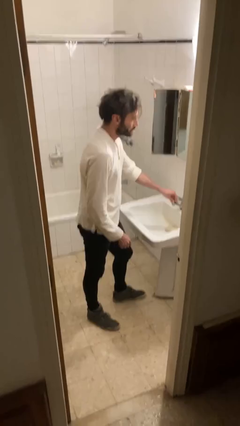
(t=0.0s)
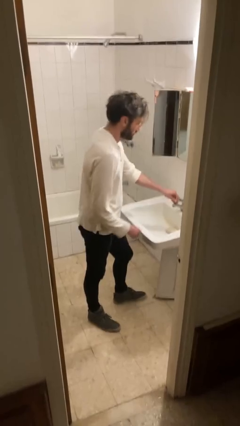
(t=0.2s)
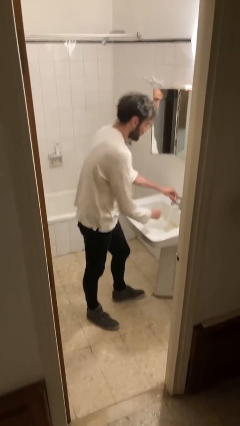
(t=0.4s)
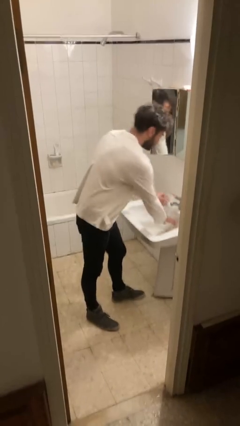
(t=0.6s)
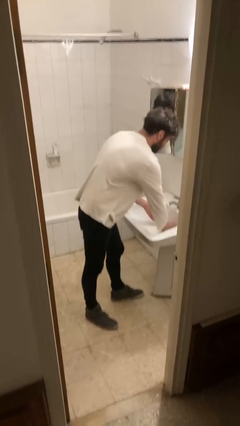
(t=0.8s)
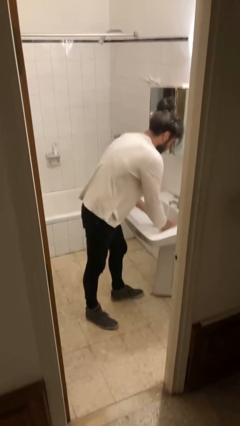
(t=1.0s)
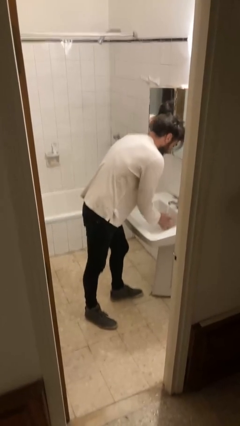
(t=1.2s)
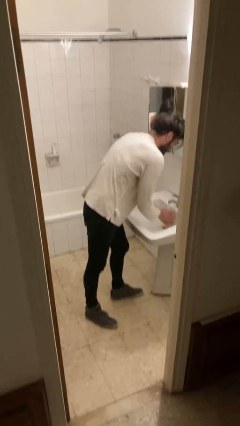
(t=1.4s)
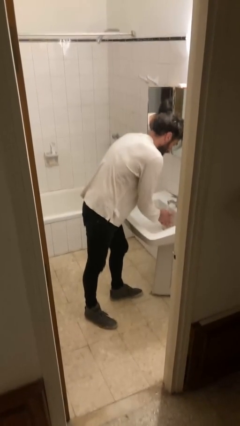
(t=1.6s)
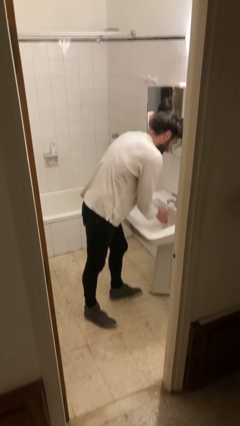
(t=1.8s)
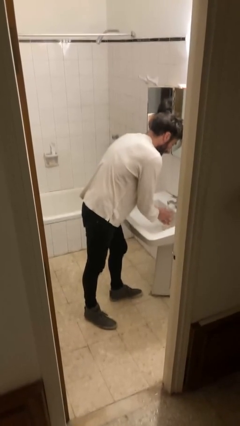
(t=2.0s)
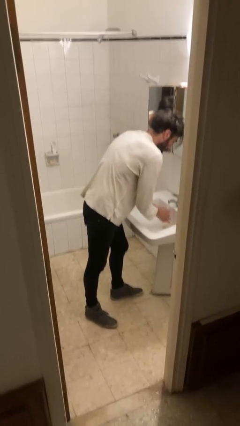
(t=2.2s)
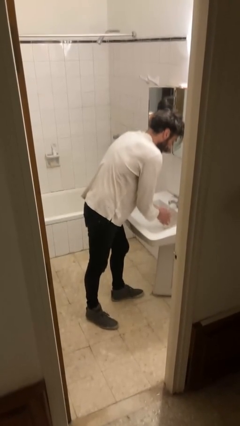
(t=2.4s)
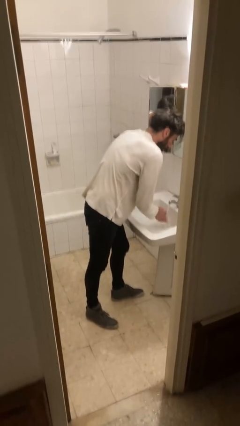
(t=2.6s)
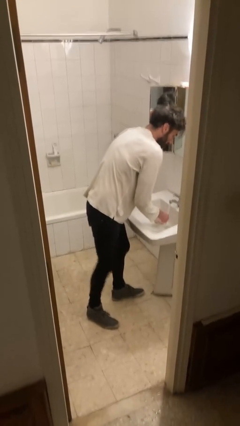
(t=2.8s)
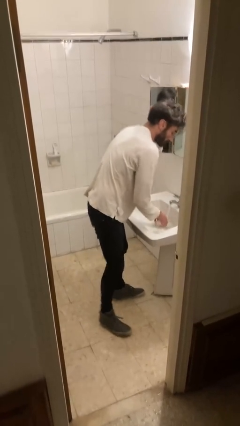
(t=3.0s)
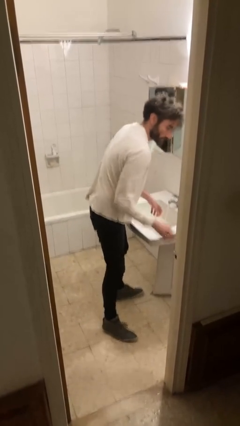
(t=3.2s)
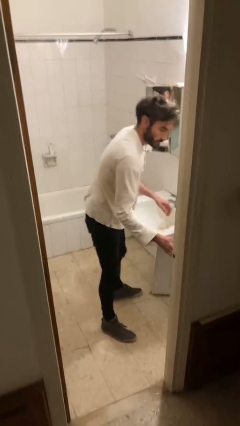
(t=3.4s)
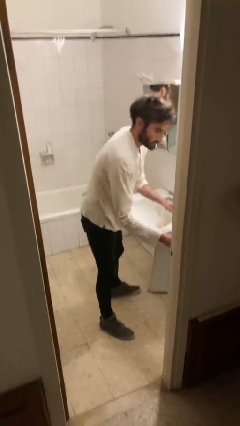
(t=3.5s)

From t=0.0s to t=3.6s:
person washes hands

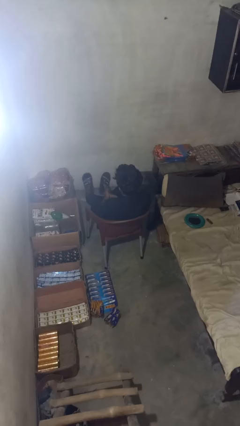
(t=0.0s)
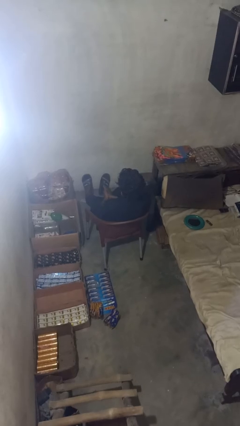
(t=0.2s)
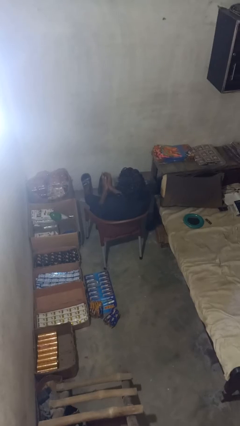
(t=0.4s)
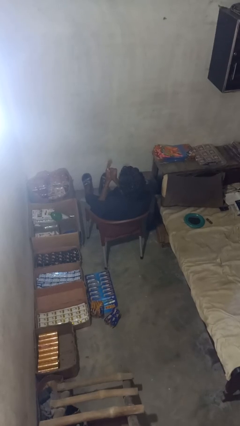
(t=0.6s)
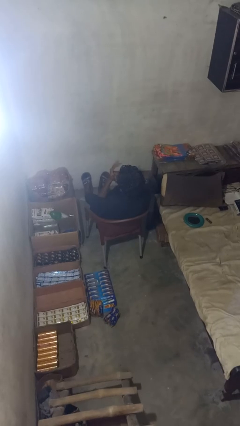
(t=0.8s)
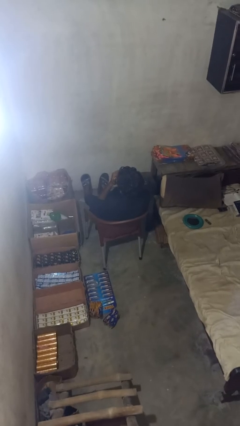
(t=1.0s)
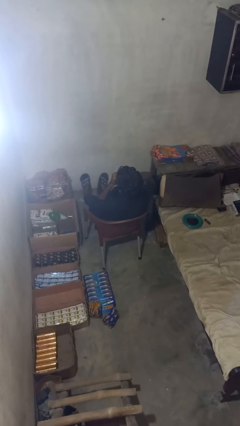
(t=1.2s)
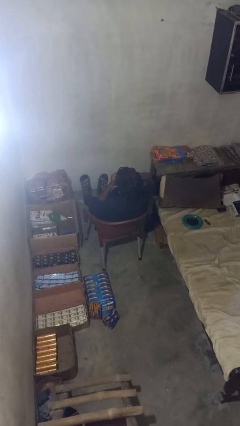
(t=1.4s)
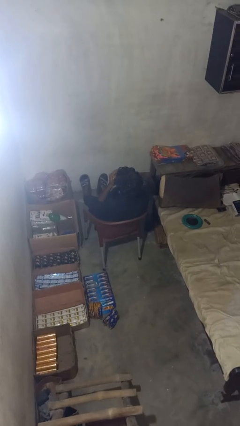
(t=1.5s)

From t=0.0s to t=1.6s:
person blows into hands

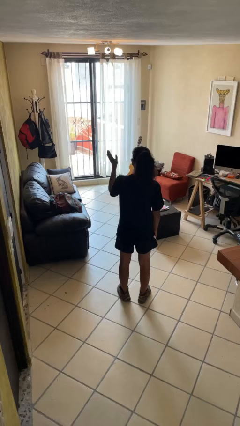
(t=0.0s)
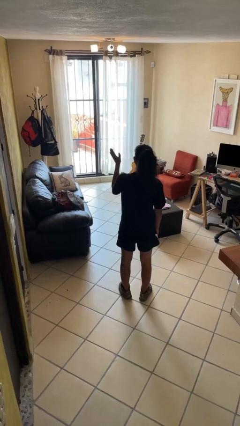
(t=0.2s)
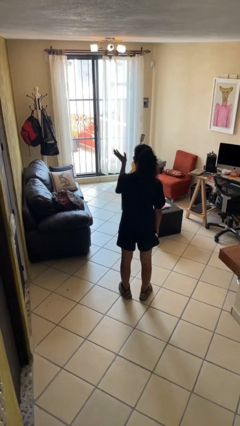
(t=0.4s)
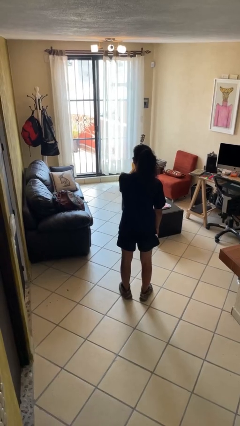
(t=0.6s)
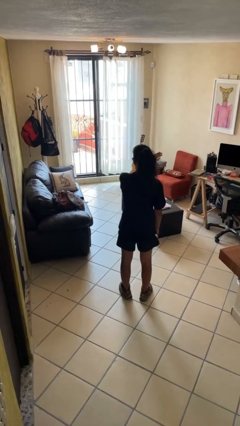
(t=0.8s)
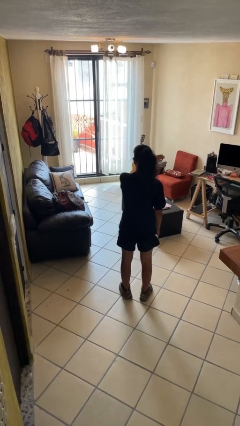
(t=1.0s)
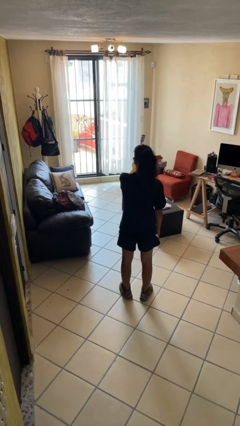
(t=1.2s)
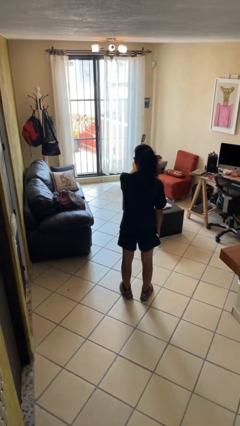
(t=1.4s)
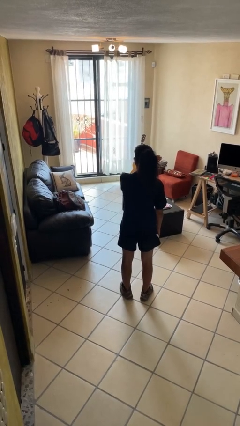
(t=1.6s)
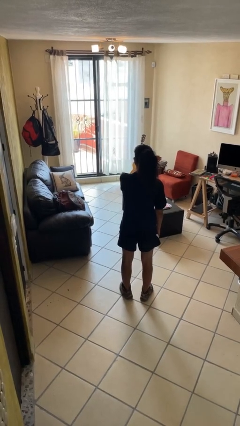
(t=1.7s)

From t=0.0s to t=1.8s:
person gestures swipe right

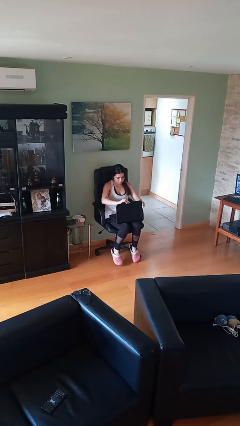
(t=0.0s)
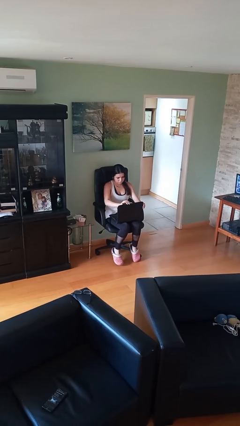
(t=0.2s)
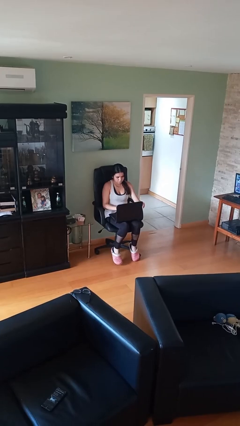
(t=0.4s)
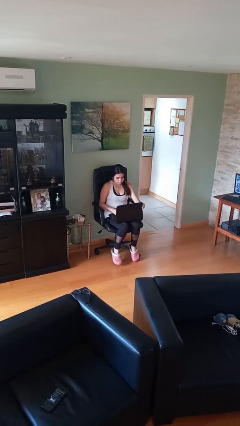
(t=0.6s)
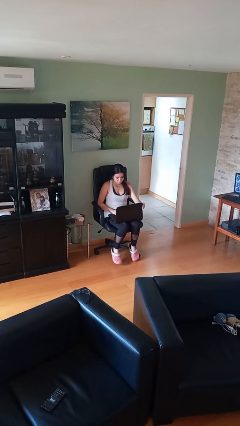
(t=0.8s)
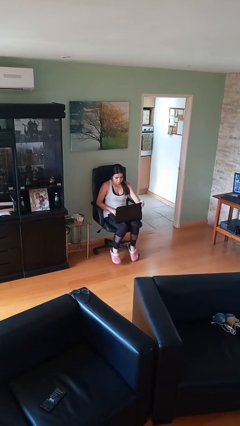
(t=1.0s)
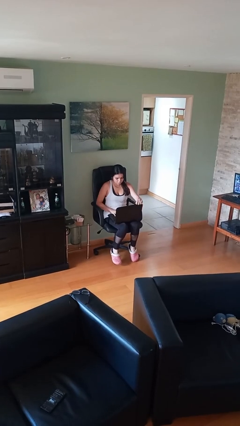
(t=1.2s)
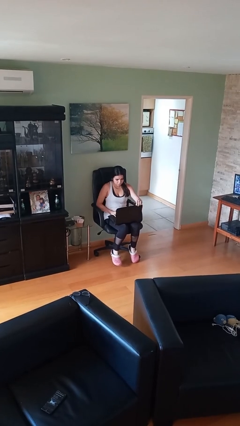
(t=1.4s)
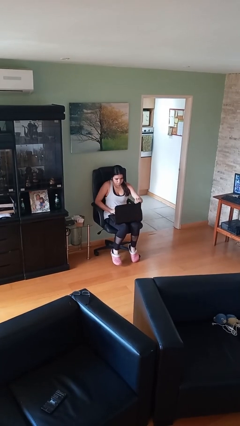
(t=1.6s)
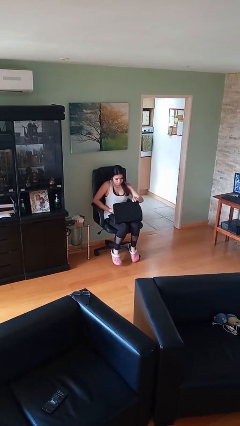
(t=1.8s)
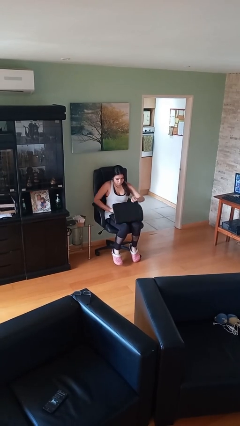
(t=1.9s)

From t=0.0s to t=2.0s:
person interacts with laptop

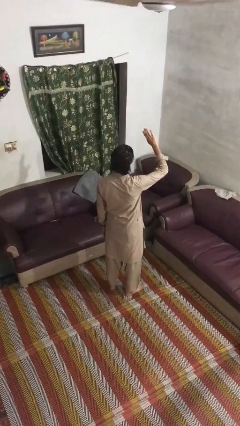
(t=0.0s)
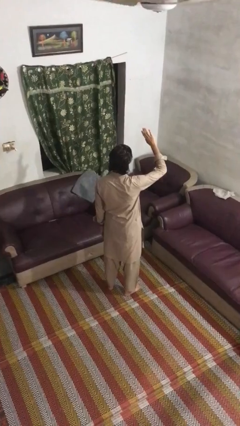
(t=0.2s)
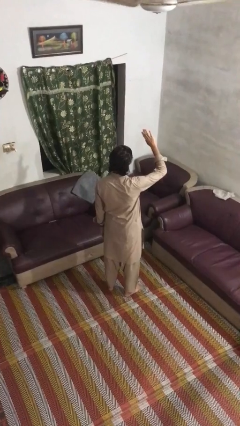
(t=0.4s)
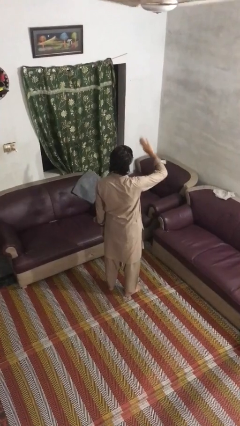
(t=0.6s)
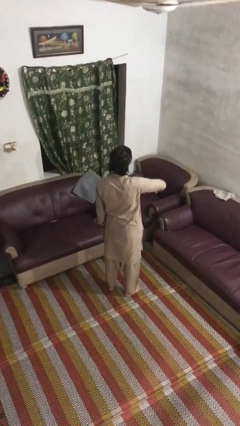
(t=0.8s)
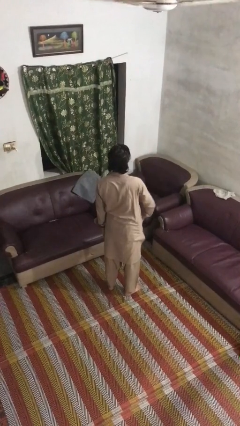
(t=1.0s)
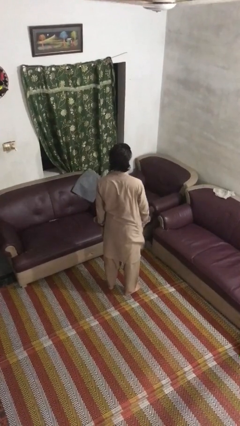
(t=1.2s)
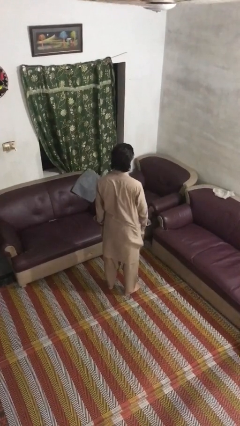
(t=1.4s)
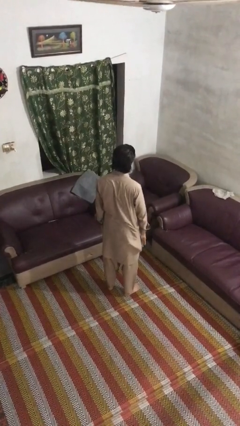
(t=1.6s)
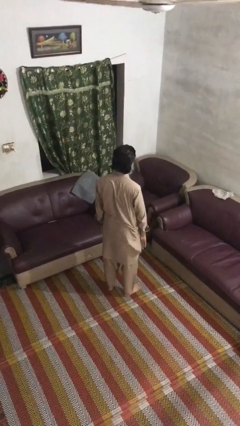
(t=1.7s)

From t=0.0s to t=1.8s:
person gestures swipe down

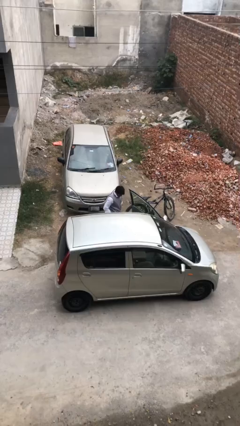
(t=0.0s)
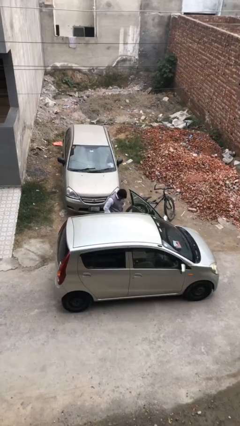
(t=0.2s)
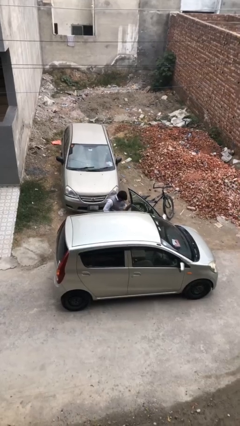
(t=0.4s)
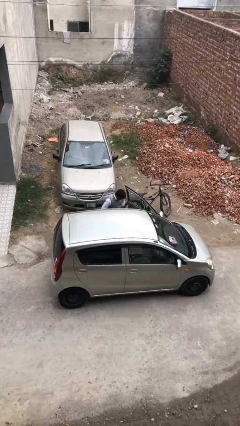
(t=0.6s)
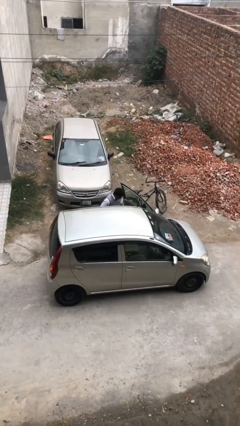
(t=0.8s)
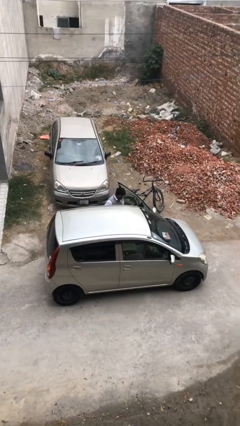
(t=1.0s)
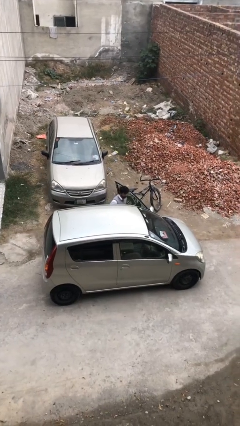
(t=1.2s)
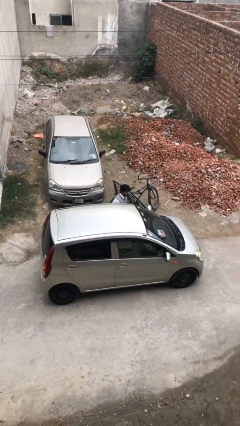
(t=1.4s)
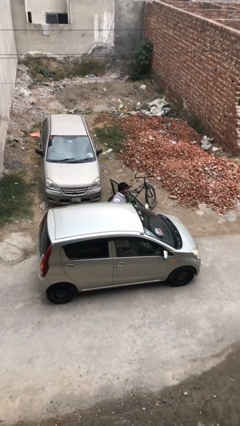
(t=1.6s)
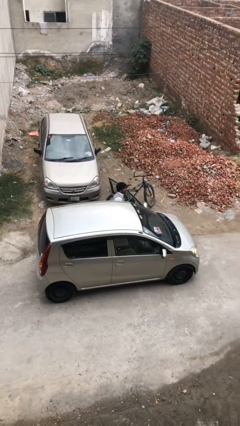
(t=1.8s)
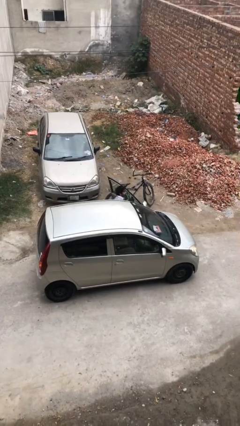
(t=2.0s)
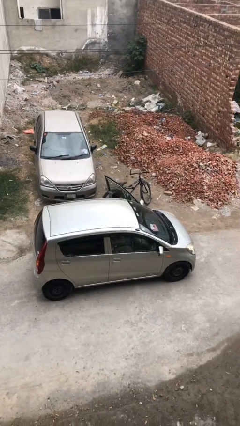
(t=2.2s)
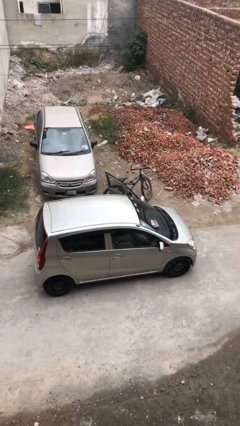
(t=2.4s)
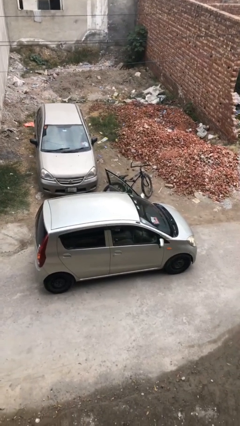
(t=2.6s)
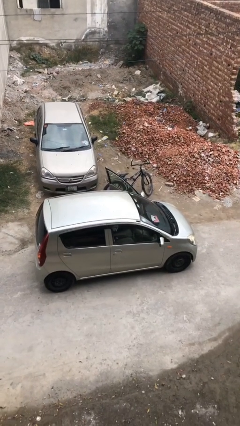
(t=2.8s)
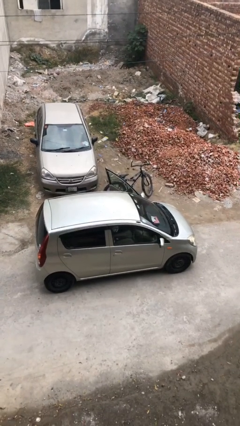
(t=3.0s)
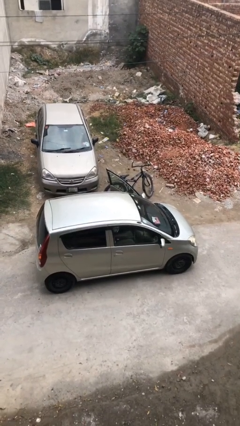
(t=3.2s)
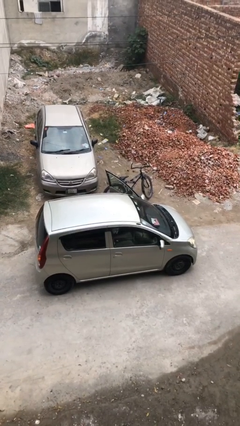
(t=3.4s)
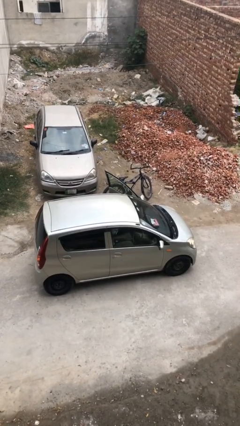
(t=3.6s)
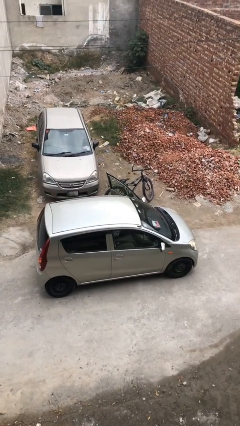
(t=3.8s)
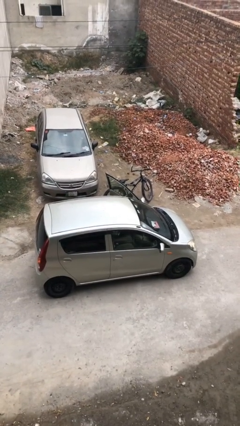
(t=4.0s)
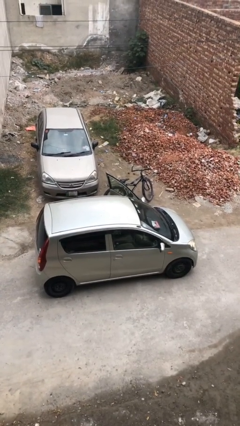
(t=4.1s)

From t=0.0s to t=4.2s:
person enters car

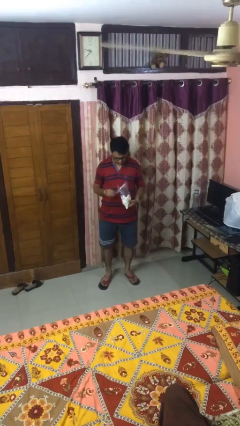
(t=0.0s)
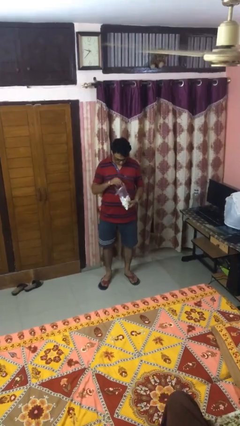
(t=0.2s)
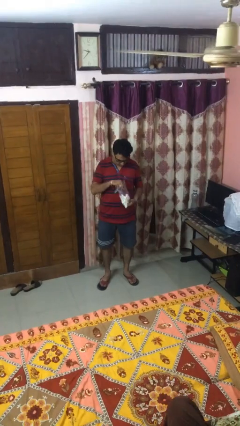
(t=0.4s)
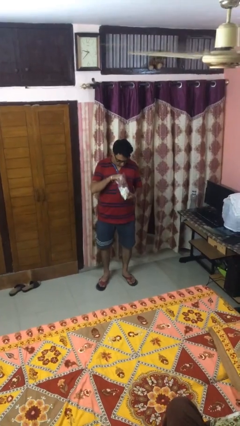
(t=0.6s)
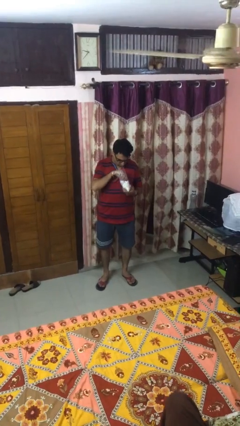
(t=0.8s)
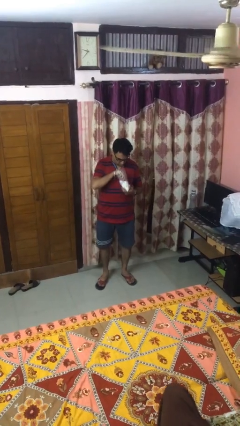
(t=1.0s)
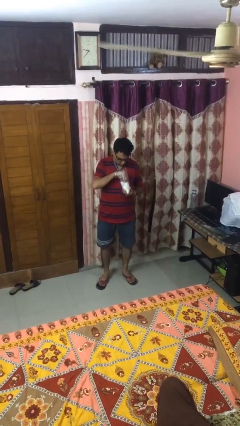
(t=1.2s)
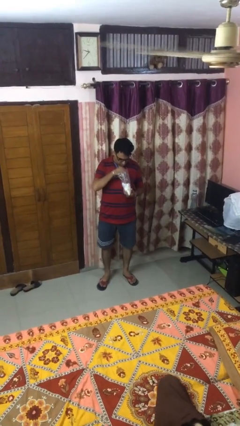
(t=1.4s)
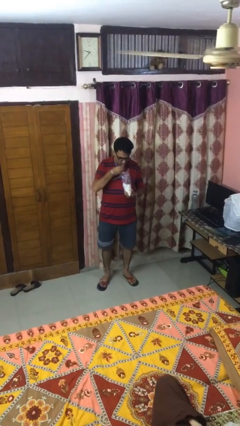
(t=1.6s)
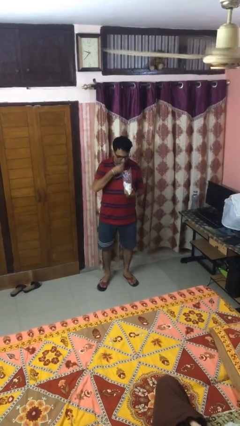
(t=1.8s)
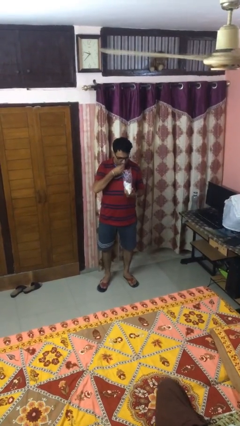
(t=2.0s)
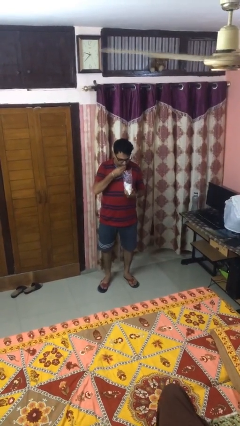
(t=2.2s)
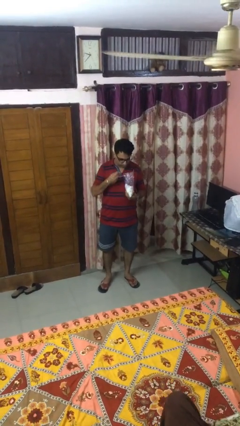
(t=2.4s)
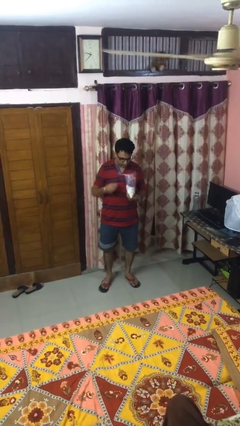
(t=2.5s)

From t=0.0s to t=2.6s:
person eats snack from bag
